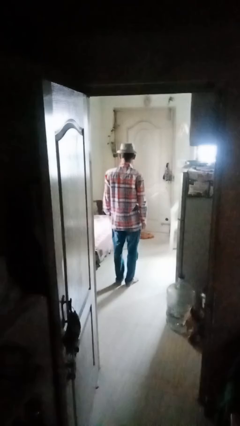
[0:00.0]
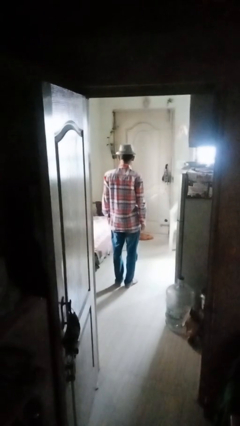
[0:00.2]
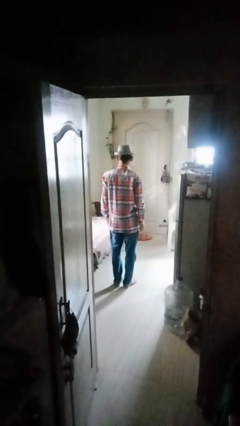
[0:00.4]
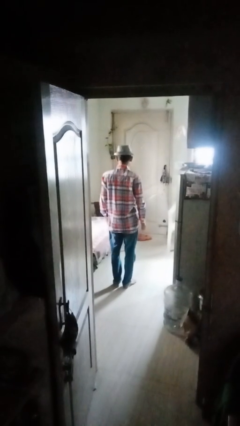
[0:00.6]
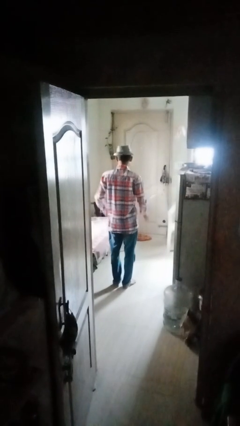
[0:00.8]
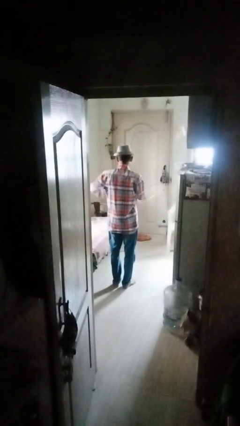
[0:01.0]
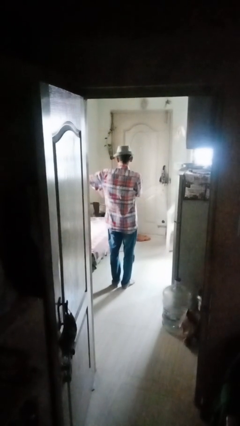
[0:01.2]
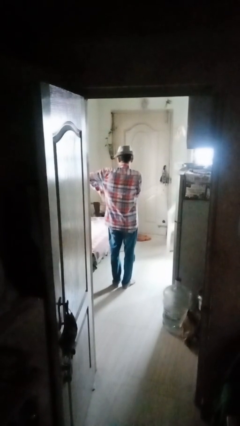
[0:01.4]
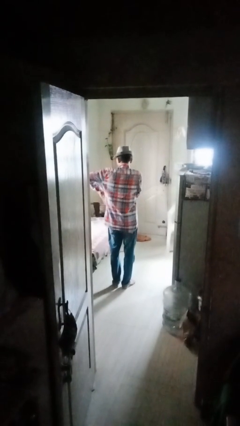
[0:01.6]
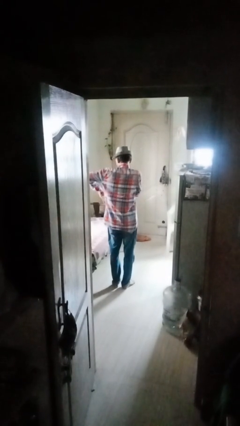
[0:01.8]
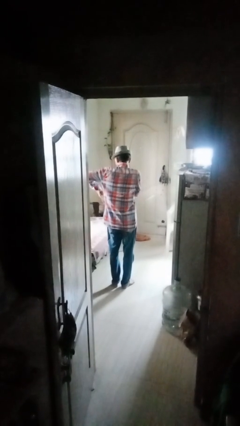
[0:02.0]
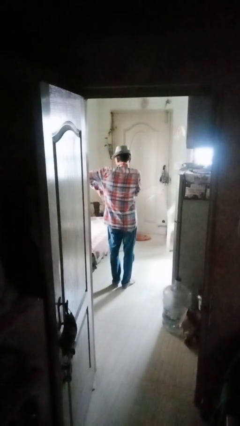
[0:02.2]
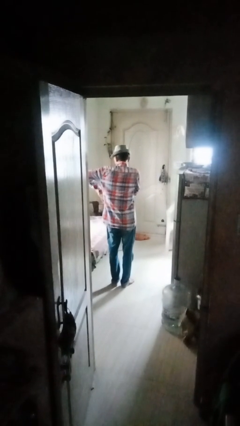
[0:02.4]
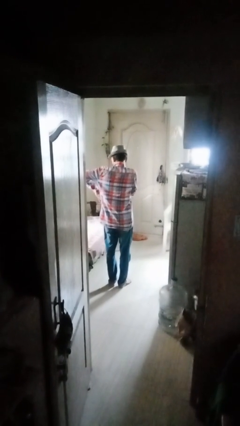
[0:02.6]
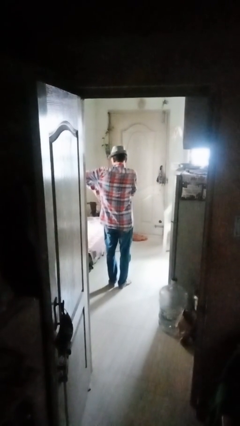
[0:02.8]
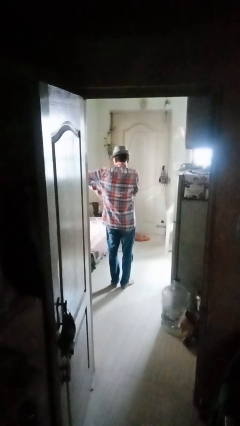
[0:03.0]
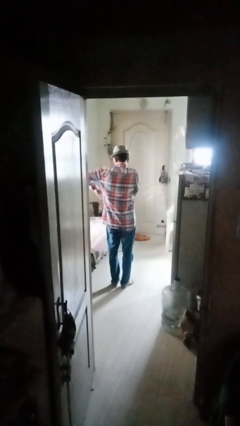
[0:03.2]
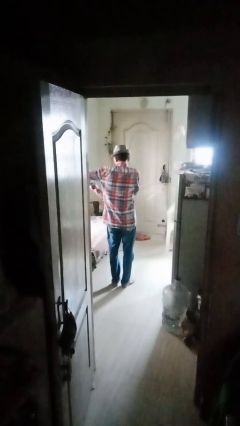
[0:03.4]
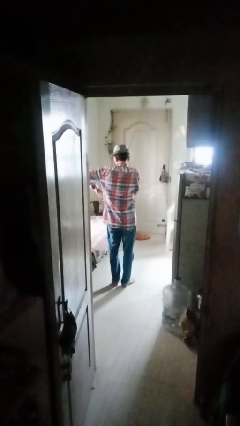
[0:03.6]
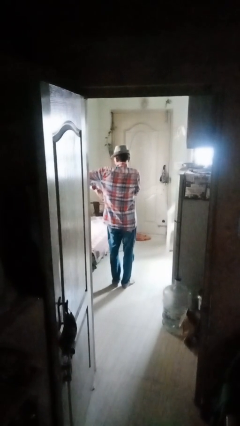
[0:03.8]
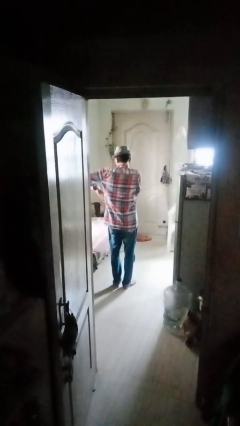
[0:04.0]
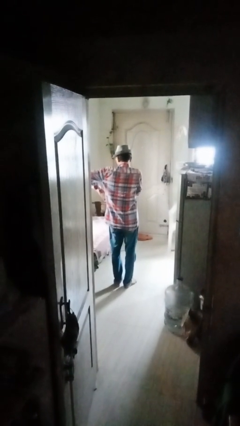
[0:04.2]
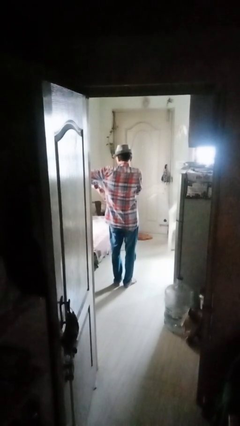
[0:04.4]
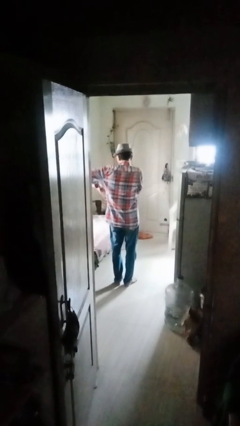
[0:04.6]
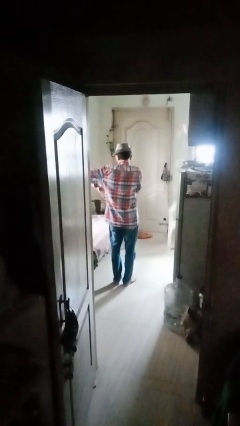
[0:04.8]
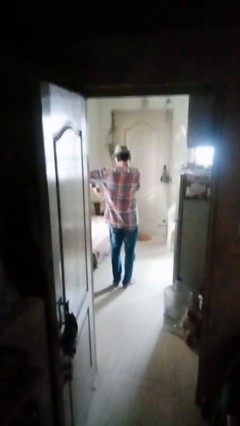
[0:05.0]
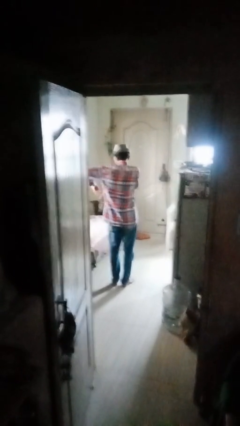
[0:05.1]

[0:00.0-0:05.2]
person gestures heart

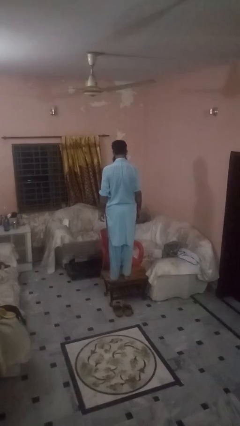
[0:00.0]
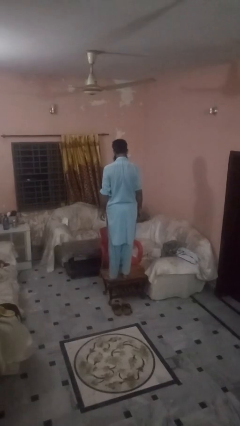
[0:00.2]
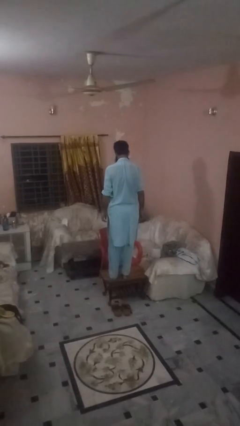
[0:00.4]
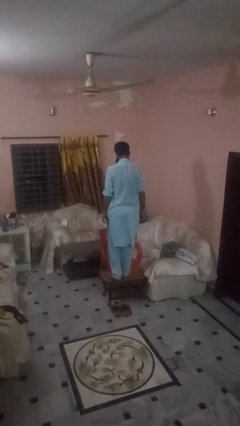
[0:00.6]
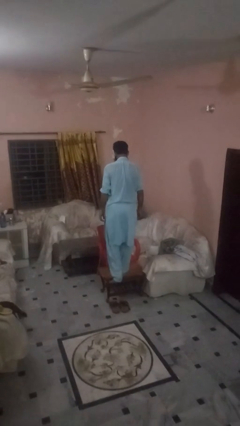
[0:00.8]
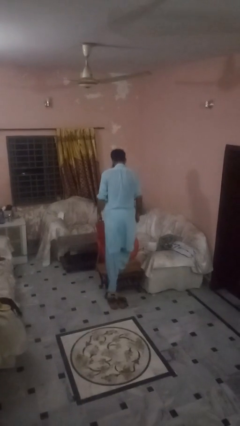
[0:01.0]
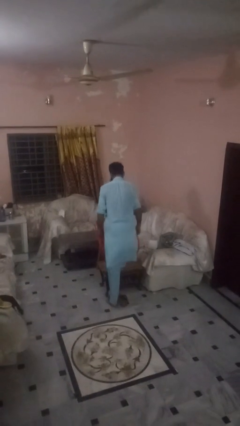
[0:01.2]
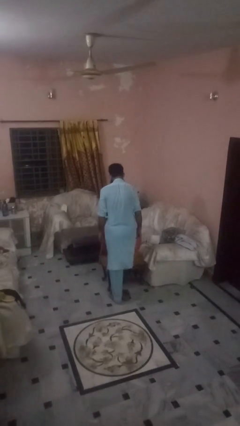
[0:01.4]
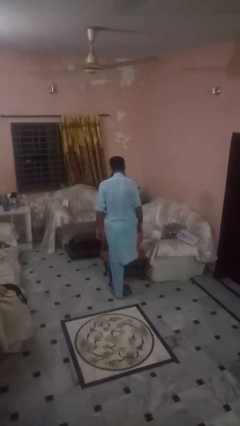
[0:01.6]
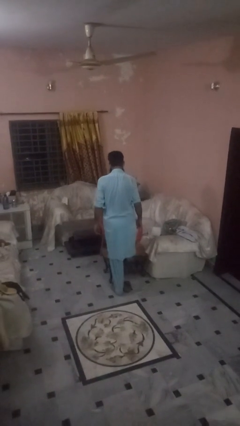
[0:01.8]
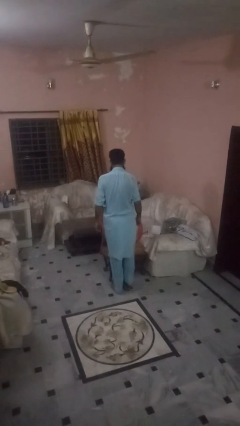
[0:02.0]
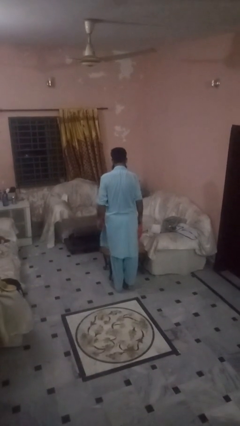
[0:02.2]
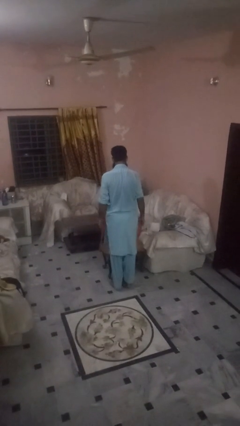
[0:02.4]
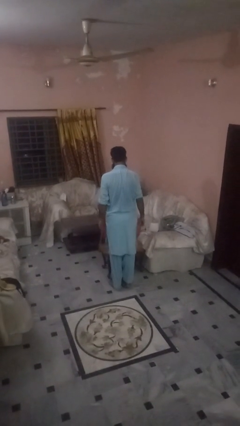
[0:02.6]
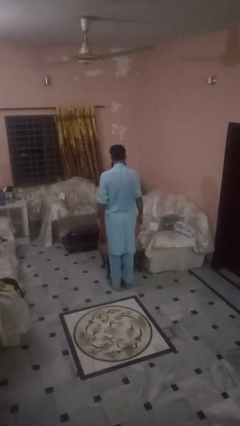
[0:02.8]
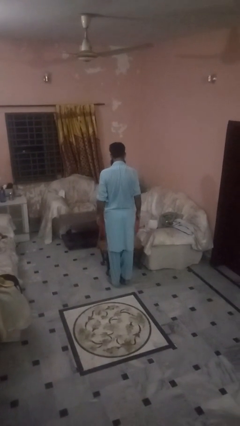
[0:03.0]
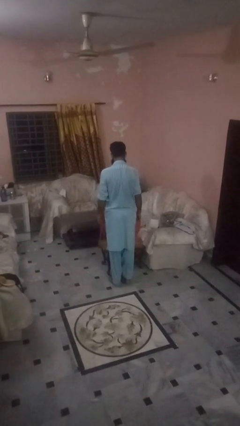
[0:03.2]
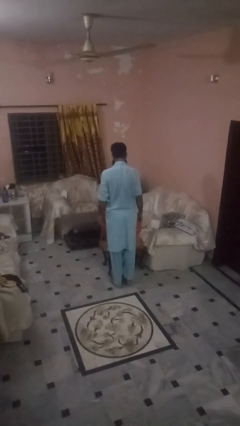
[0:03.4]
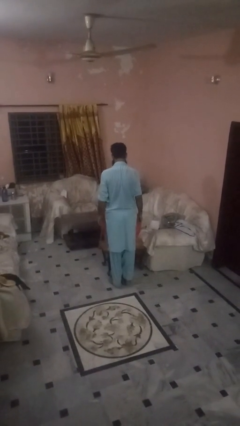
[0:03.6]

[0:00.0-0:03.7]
person climbs off table

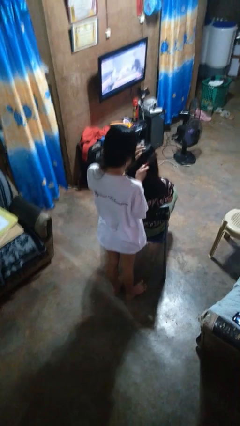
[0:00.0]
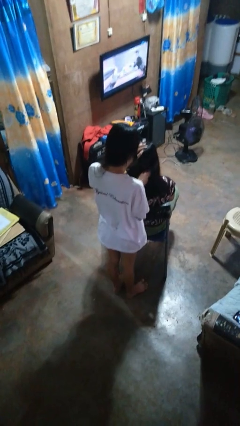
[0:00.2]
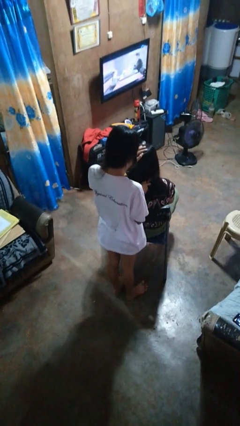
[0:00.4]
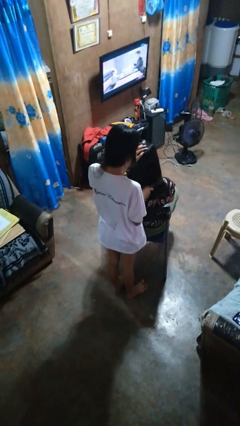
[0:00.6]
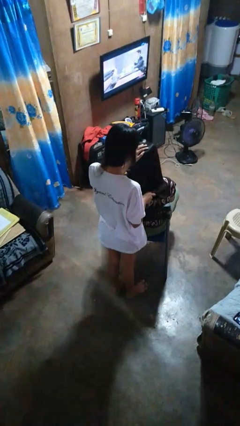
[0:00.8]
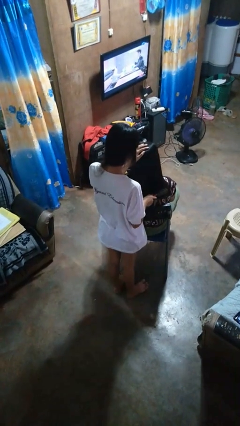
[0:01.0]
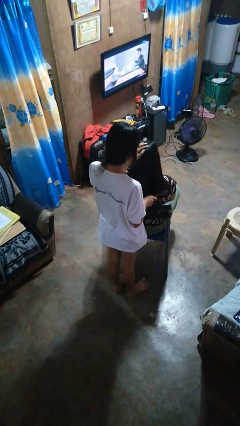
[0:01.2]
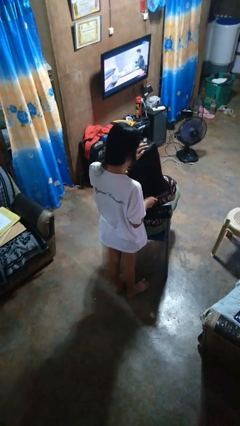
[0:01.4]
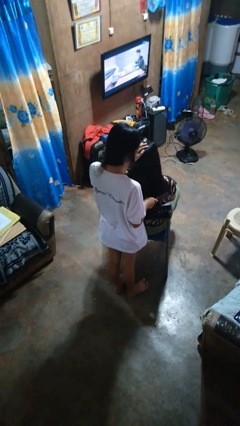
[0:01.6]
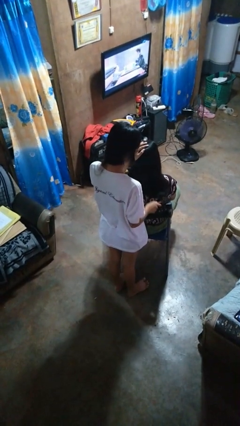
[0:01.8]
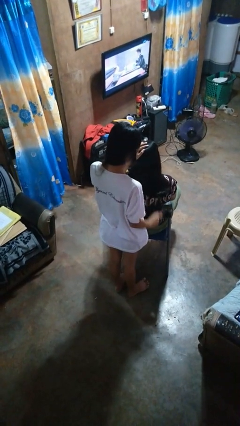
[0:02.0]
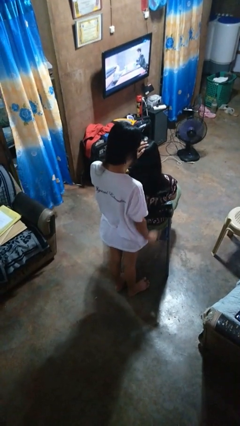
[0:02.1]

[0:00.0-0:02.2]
person brushes hair of person

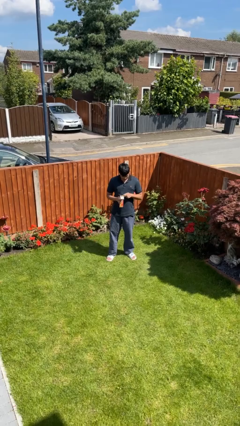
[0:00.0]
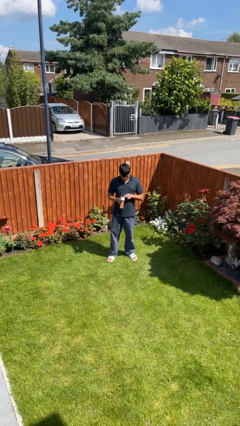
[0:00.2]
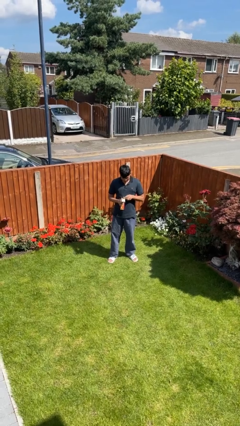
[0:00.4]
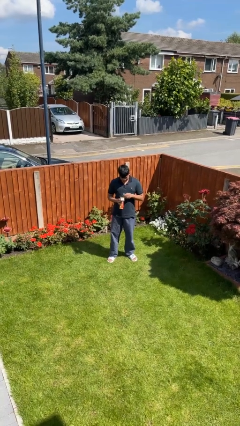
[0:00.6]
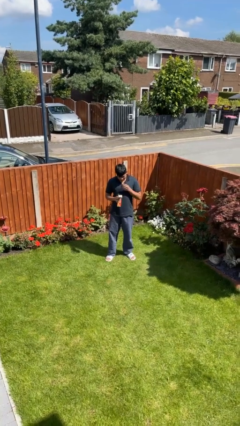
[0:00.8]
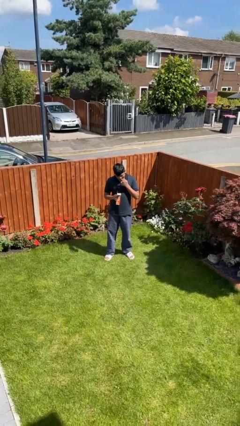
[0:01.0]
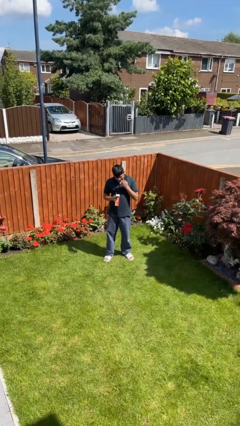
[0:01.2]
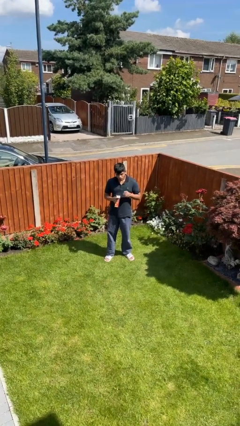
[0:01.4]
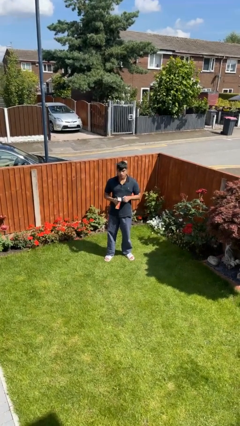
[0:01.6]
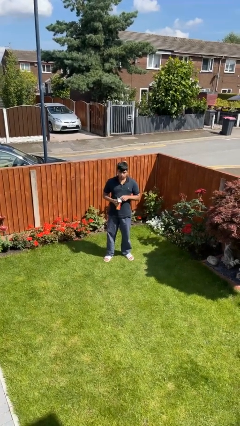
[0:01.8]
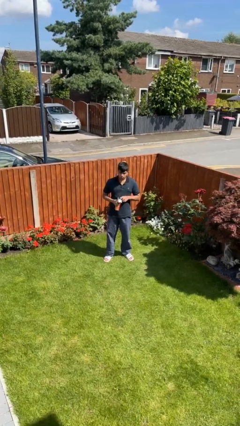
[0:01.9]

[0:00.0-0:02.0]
person eats snack from bag

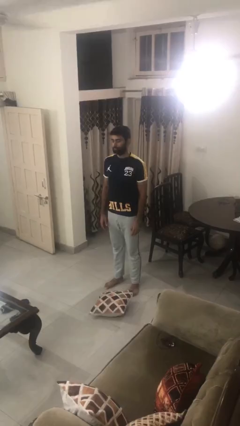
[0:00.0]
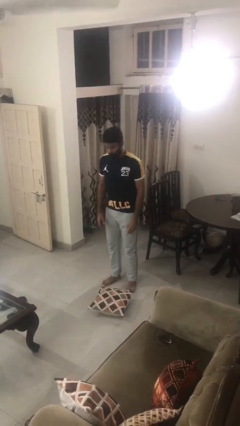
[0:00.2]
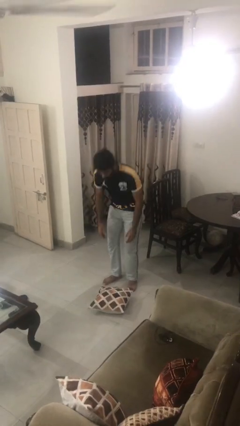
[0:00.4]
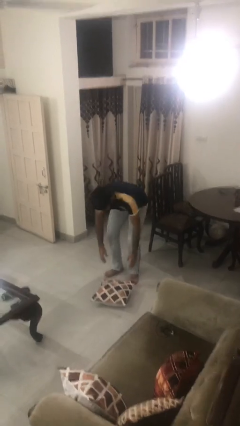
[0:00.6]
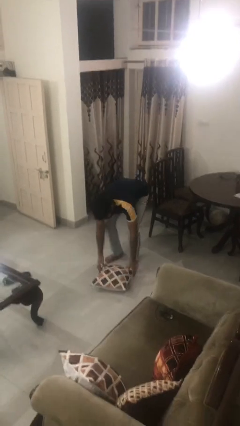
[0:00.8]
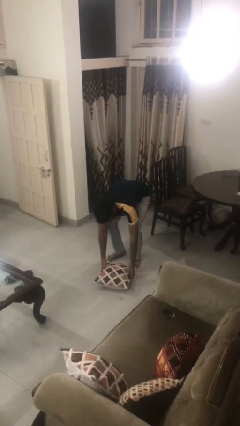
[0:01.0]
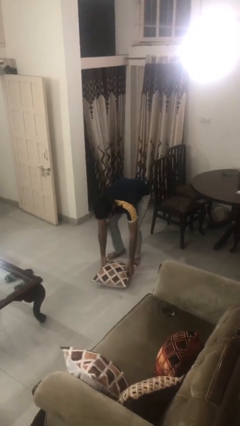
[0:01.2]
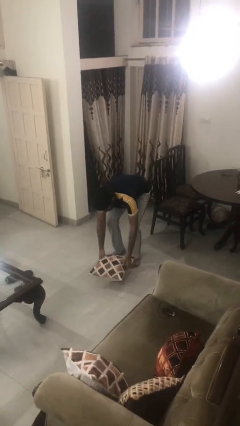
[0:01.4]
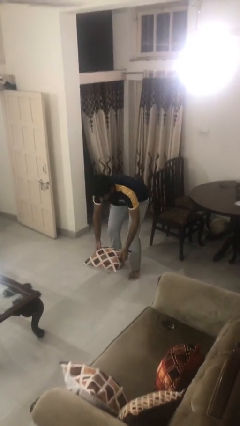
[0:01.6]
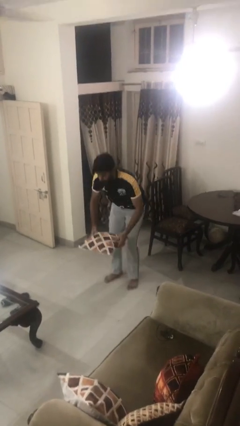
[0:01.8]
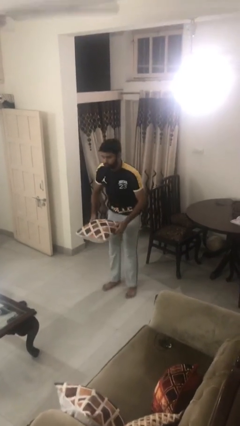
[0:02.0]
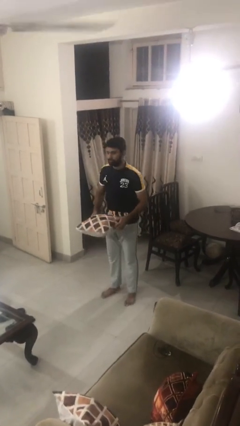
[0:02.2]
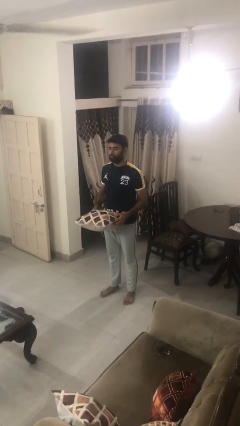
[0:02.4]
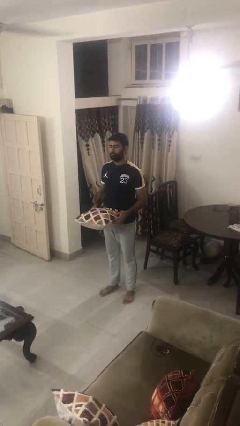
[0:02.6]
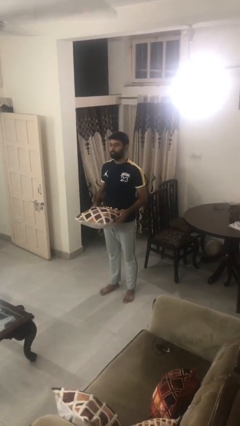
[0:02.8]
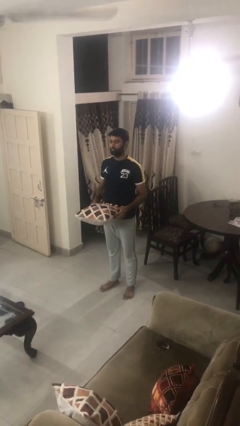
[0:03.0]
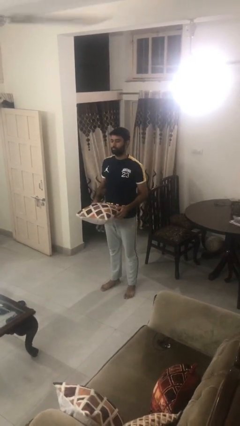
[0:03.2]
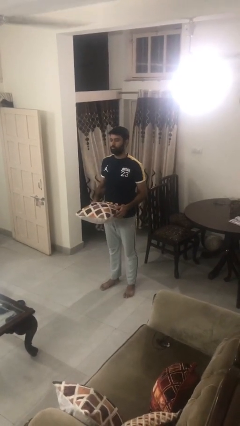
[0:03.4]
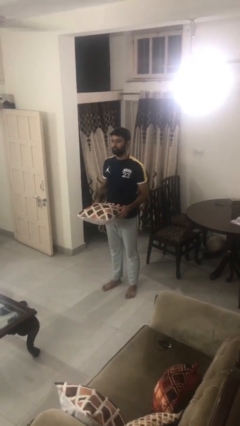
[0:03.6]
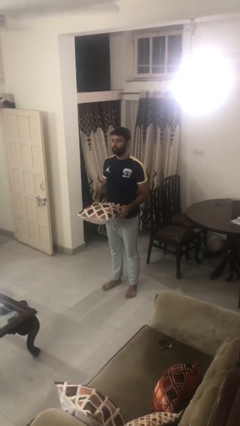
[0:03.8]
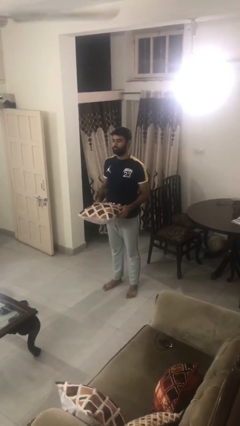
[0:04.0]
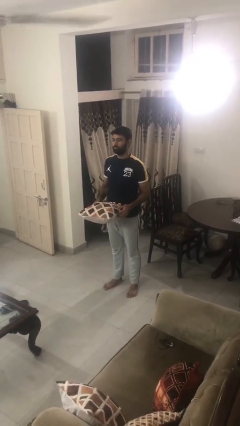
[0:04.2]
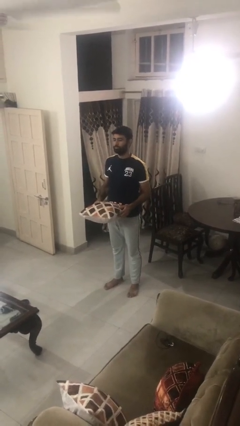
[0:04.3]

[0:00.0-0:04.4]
person picks up object from floor

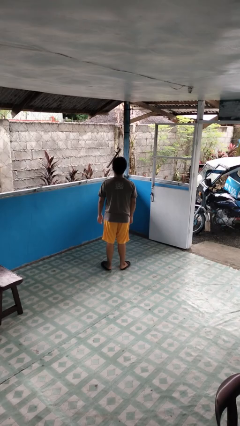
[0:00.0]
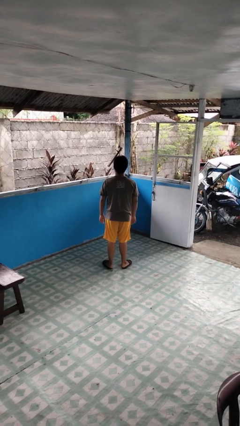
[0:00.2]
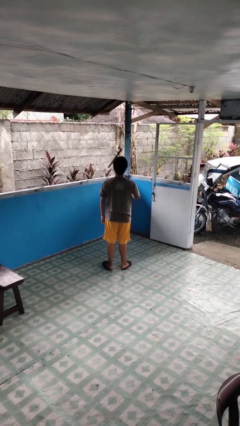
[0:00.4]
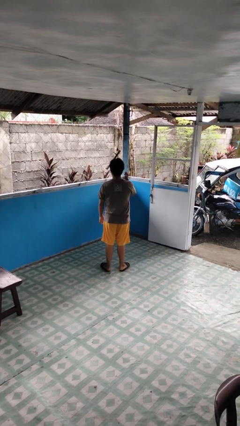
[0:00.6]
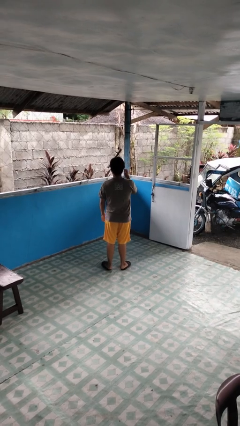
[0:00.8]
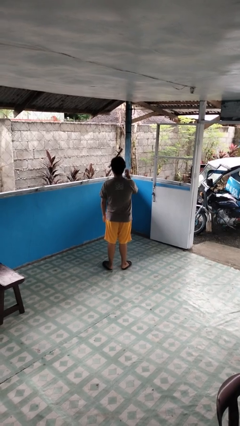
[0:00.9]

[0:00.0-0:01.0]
person gestures behind me
